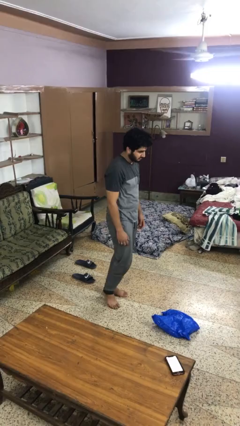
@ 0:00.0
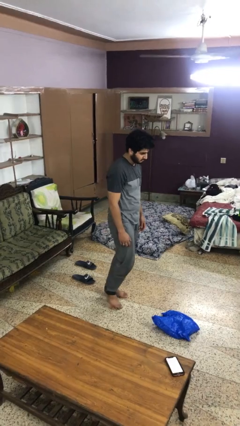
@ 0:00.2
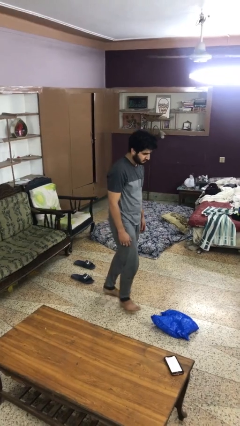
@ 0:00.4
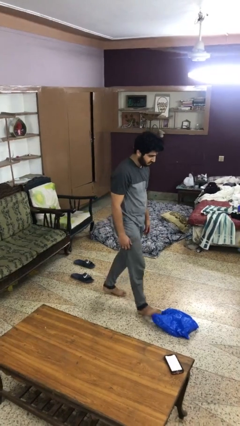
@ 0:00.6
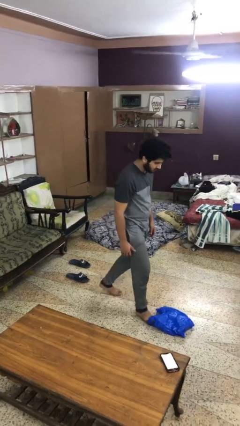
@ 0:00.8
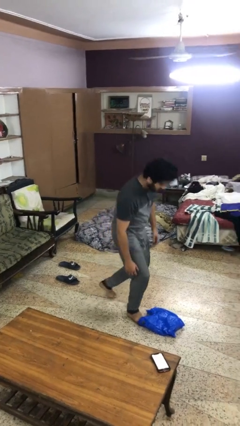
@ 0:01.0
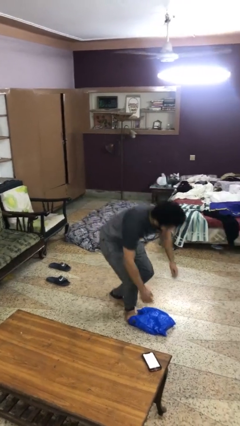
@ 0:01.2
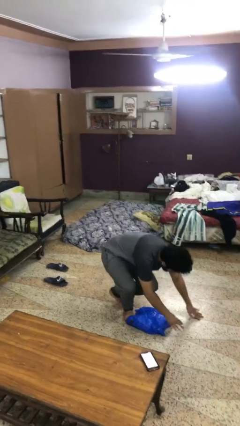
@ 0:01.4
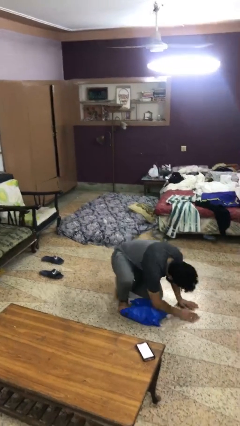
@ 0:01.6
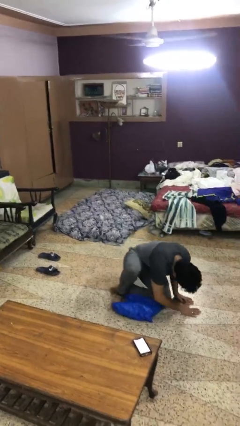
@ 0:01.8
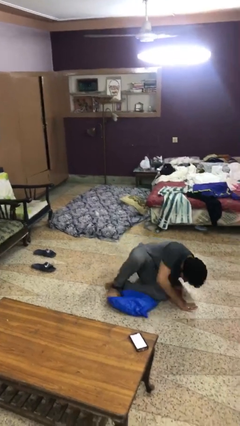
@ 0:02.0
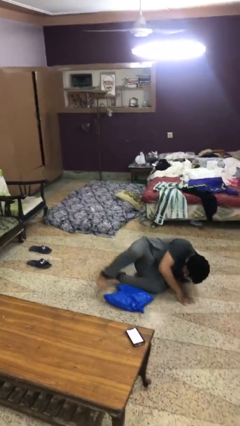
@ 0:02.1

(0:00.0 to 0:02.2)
person trips on object on floor

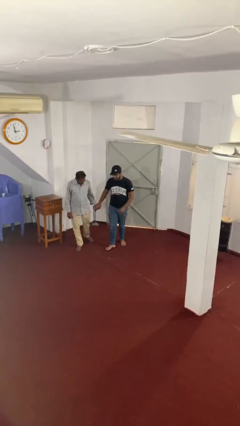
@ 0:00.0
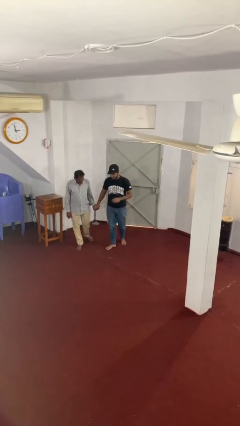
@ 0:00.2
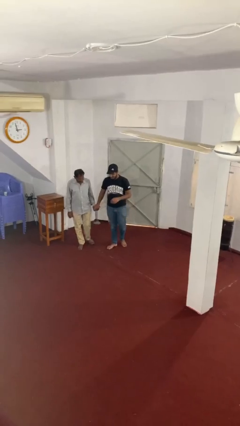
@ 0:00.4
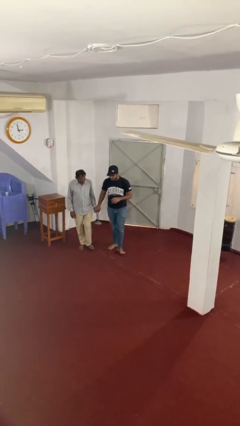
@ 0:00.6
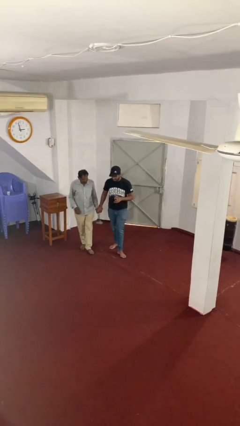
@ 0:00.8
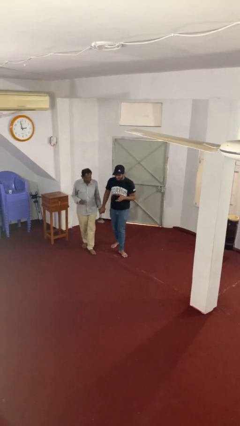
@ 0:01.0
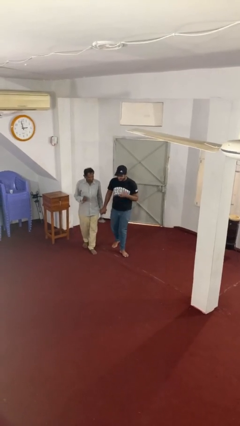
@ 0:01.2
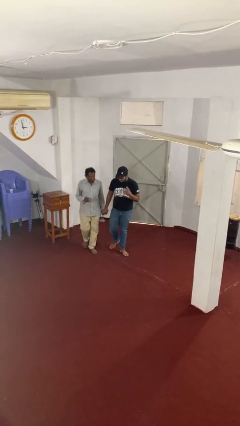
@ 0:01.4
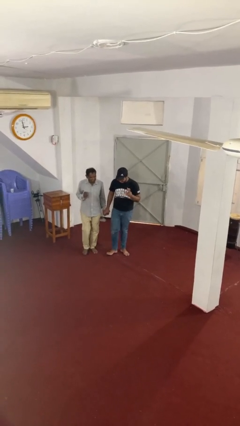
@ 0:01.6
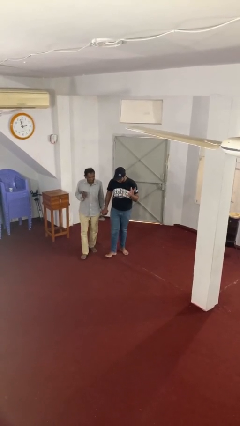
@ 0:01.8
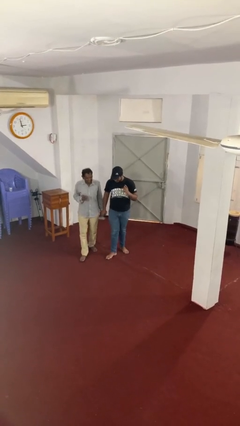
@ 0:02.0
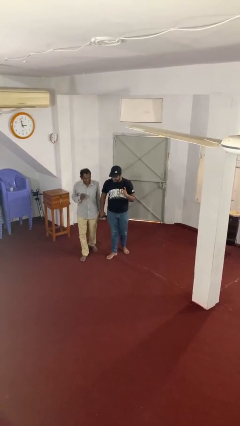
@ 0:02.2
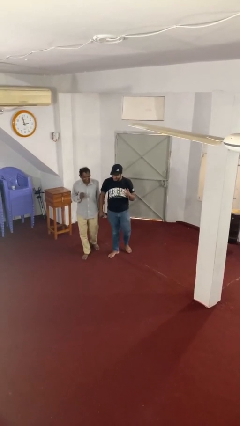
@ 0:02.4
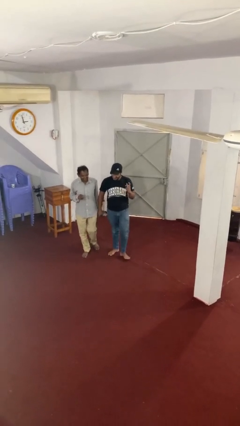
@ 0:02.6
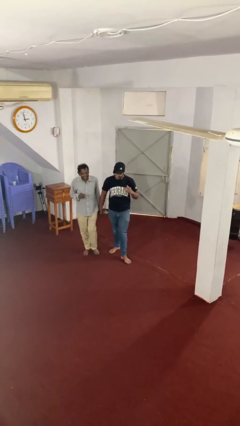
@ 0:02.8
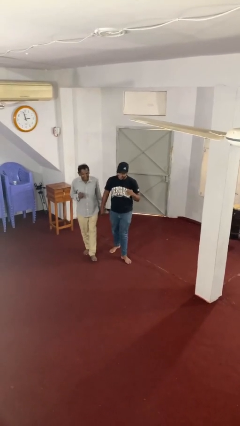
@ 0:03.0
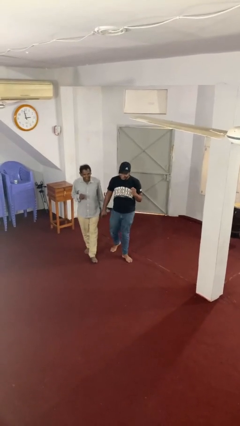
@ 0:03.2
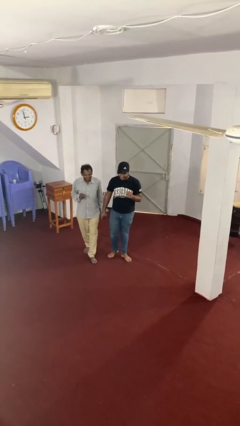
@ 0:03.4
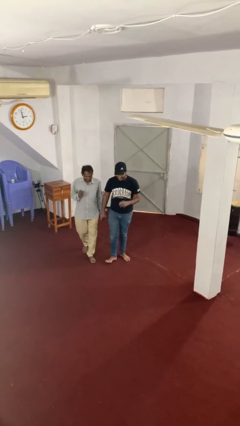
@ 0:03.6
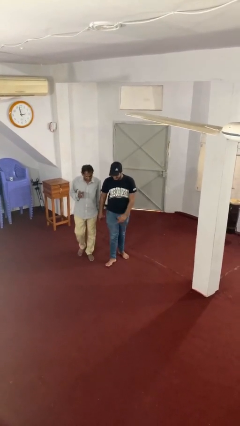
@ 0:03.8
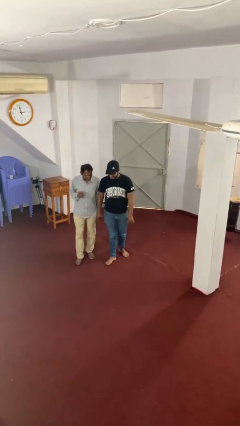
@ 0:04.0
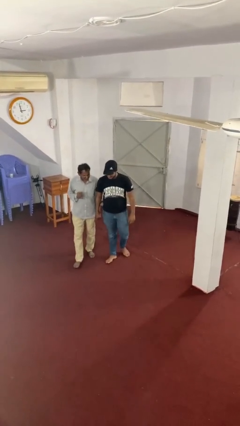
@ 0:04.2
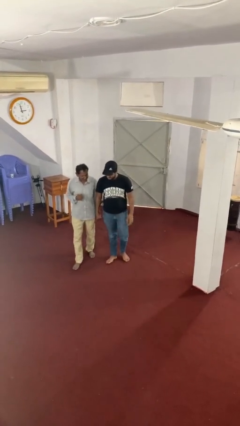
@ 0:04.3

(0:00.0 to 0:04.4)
person holds hand

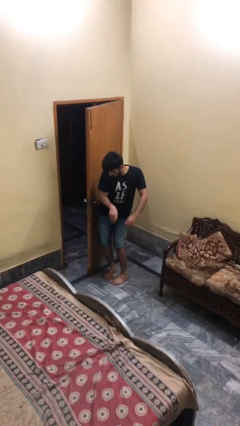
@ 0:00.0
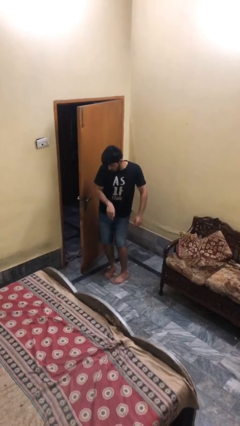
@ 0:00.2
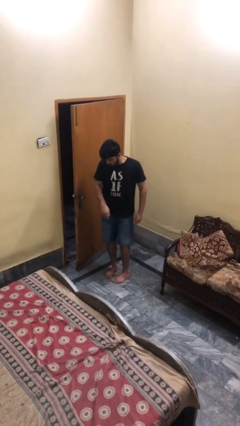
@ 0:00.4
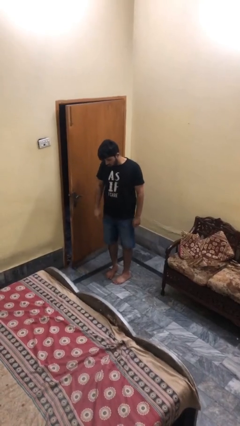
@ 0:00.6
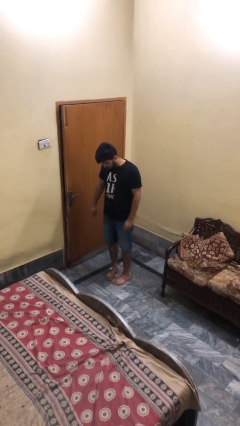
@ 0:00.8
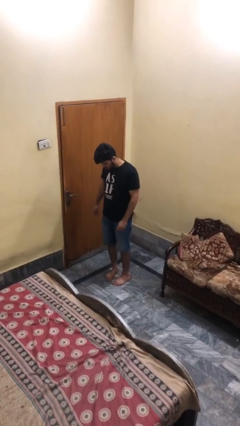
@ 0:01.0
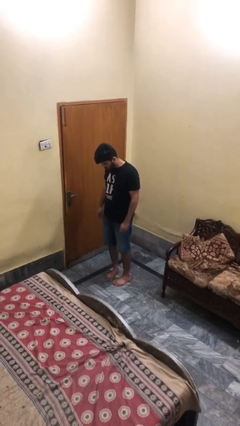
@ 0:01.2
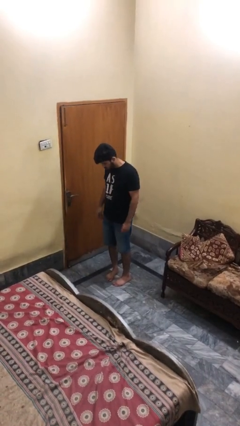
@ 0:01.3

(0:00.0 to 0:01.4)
person closes door with hip

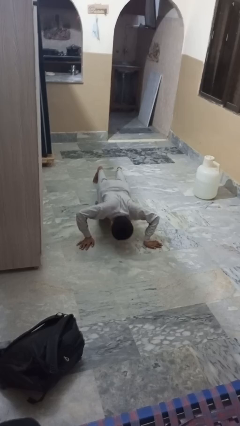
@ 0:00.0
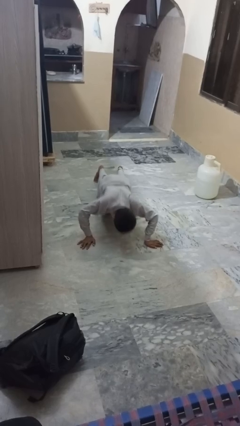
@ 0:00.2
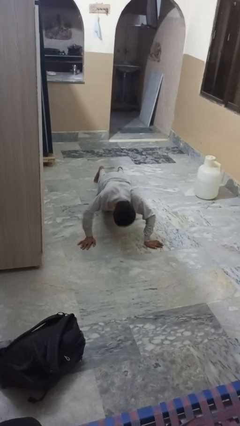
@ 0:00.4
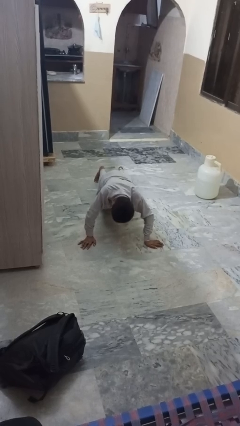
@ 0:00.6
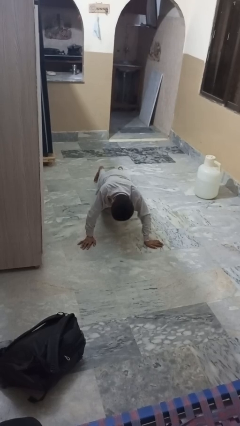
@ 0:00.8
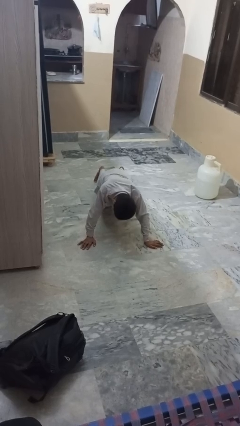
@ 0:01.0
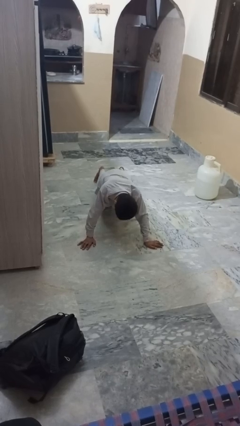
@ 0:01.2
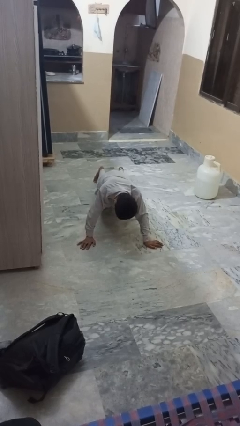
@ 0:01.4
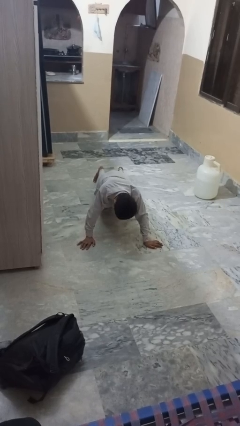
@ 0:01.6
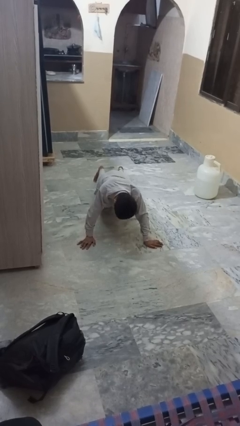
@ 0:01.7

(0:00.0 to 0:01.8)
person exercises with pushup

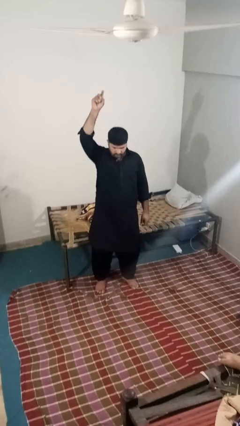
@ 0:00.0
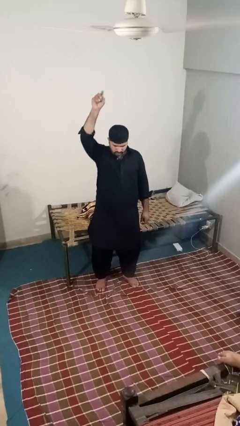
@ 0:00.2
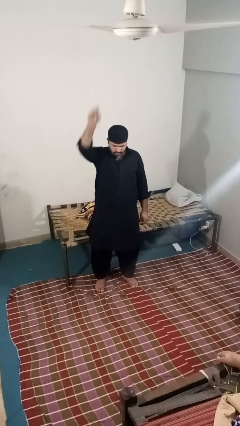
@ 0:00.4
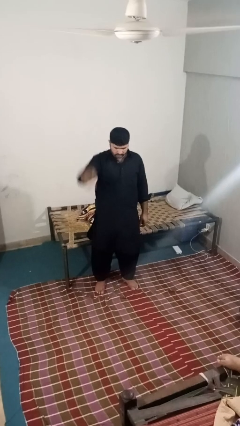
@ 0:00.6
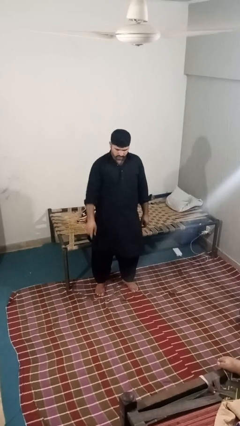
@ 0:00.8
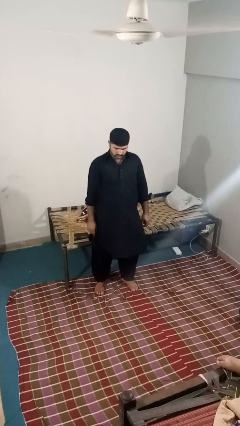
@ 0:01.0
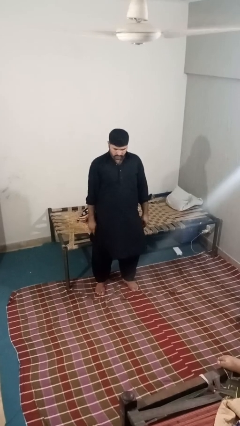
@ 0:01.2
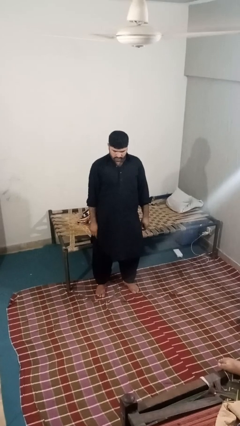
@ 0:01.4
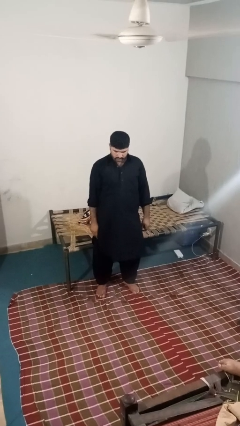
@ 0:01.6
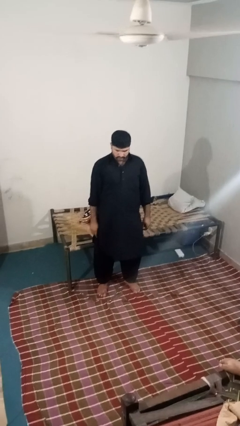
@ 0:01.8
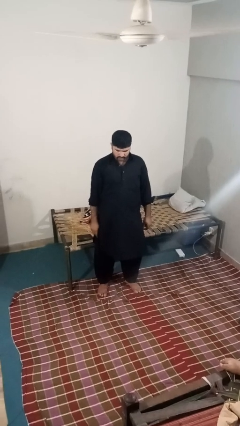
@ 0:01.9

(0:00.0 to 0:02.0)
person gestures swipe down

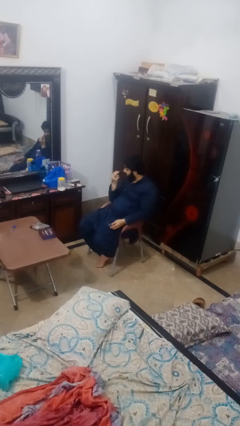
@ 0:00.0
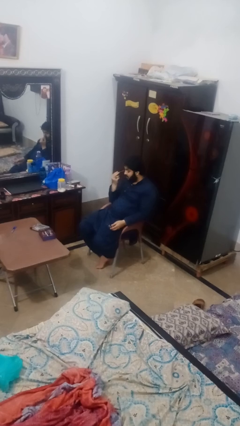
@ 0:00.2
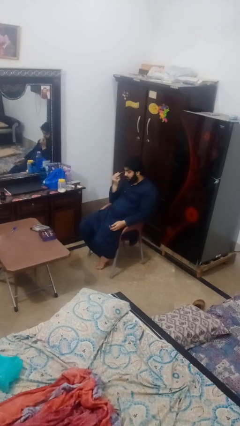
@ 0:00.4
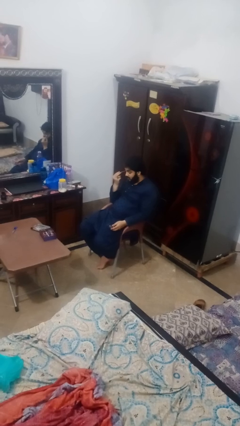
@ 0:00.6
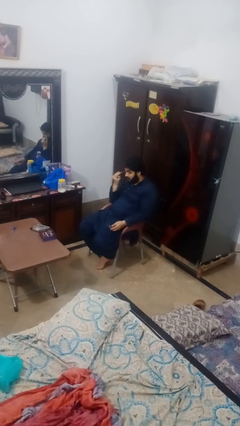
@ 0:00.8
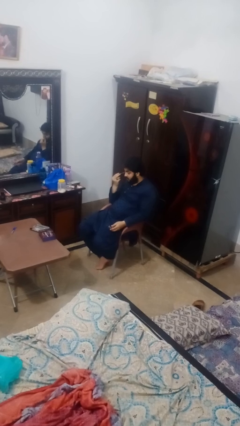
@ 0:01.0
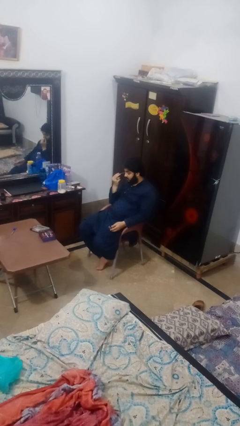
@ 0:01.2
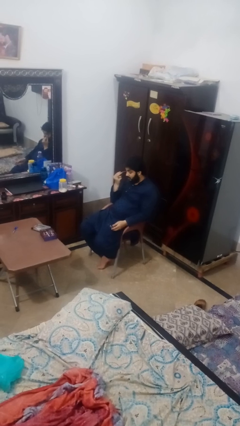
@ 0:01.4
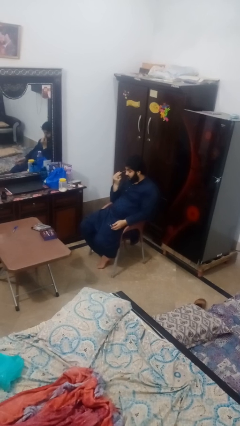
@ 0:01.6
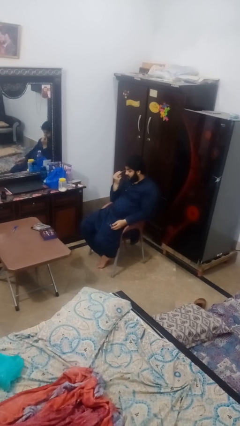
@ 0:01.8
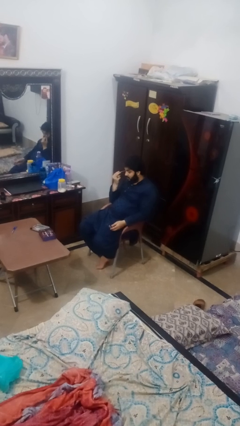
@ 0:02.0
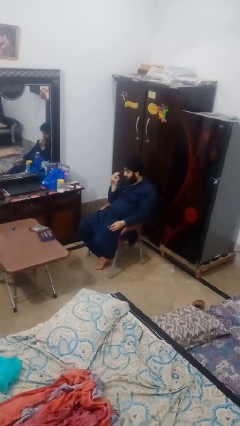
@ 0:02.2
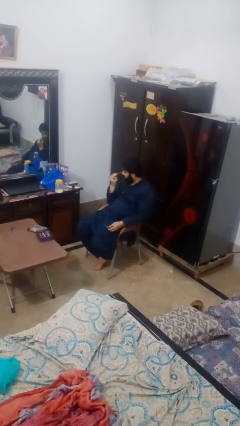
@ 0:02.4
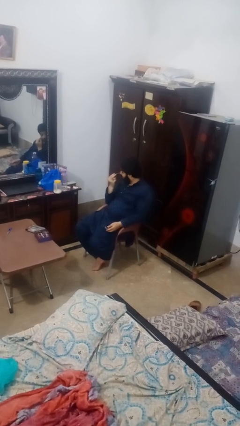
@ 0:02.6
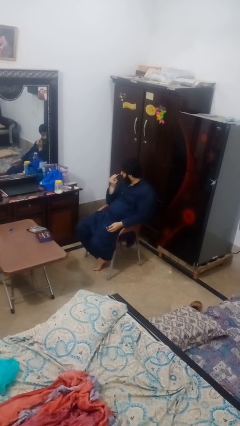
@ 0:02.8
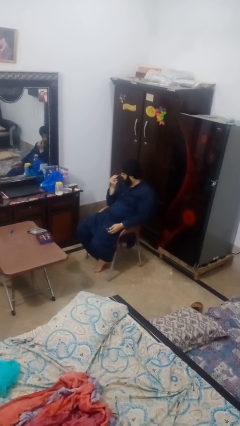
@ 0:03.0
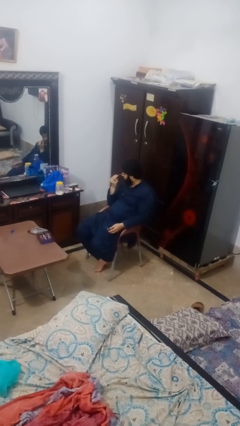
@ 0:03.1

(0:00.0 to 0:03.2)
person applies eye makeup

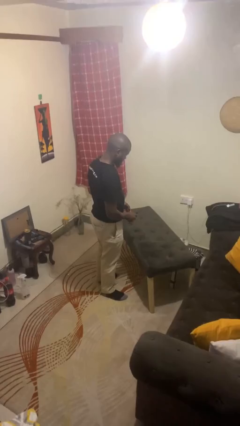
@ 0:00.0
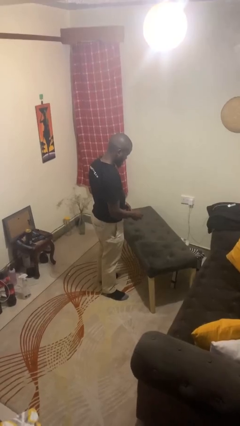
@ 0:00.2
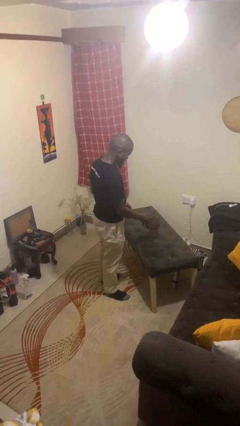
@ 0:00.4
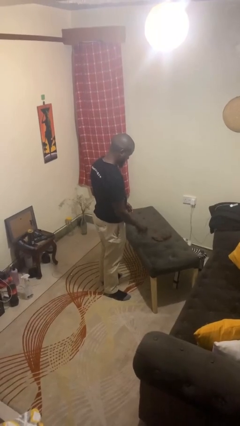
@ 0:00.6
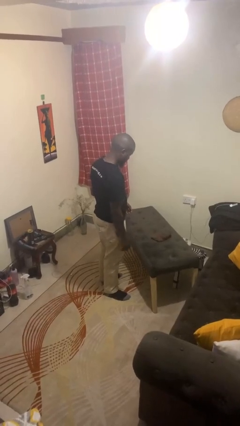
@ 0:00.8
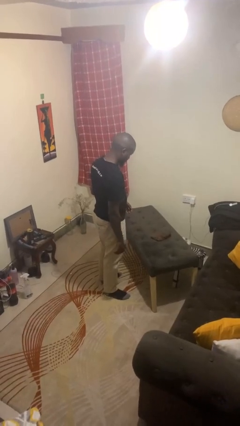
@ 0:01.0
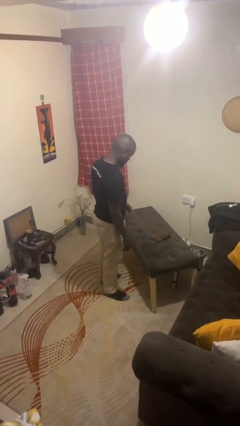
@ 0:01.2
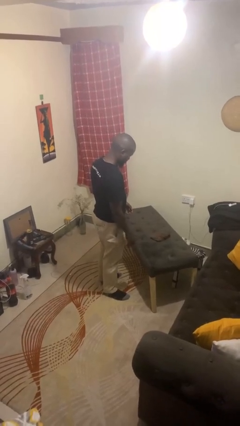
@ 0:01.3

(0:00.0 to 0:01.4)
person throws object on table

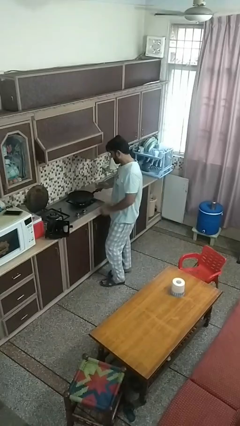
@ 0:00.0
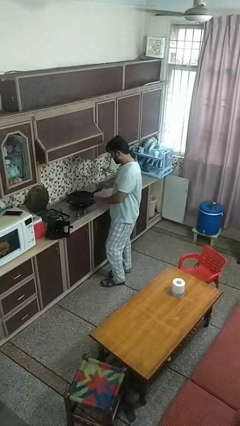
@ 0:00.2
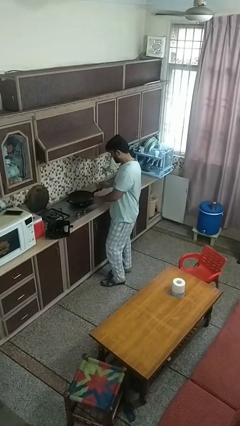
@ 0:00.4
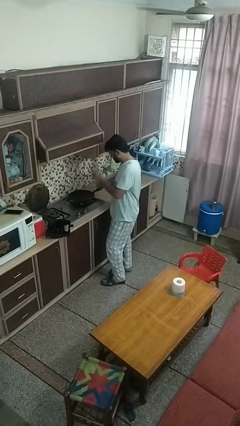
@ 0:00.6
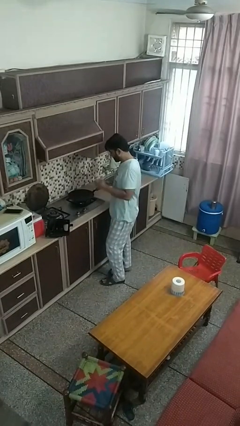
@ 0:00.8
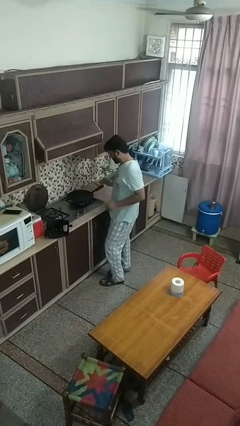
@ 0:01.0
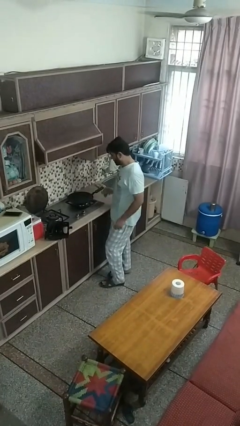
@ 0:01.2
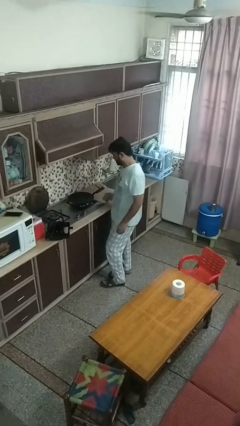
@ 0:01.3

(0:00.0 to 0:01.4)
person burns hand
